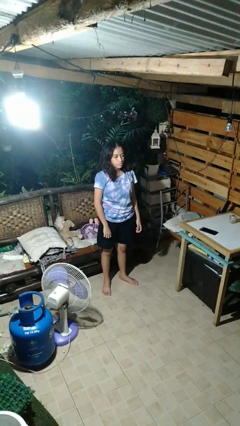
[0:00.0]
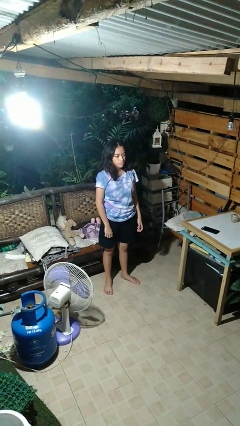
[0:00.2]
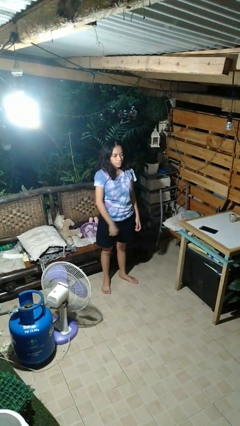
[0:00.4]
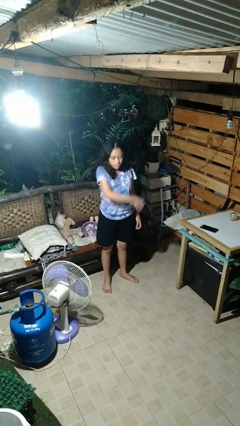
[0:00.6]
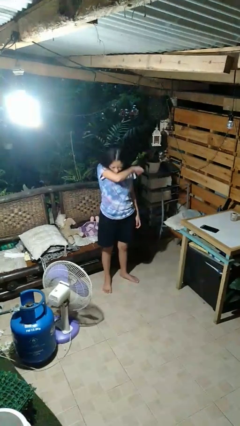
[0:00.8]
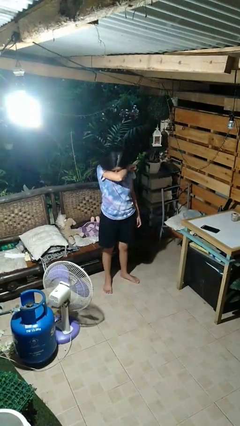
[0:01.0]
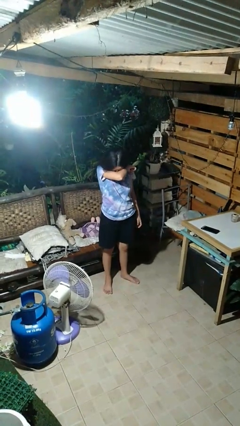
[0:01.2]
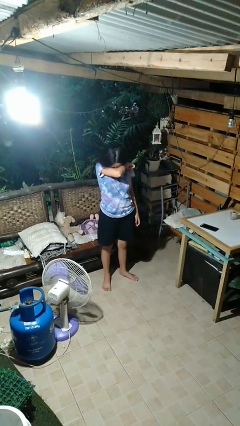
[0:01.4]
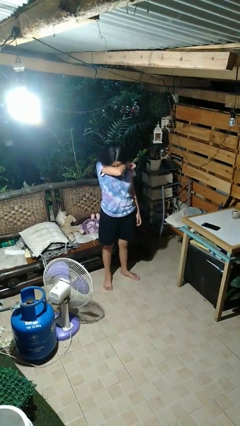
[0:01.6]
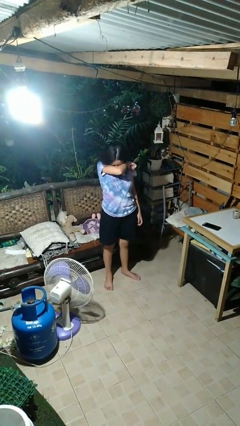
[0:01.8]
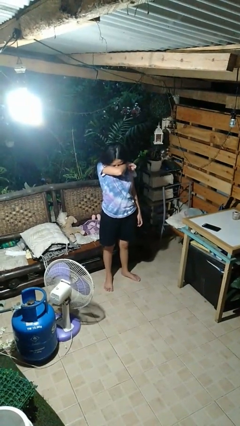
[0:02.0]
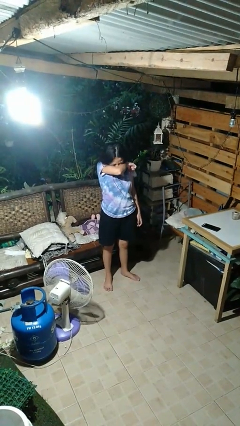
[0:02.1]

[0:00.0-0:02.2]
person sneezes into arm

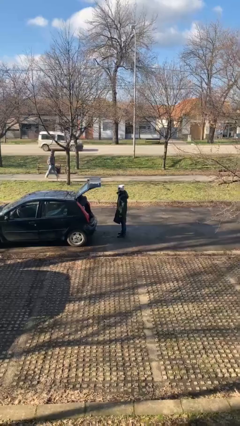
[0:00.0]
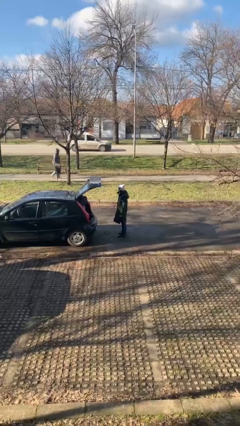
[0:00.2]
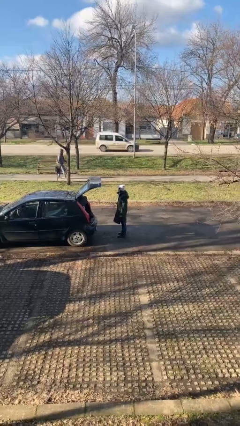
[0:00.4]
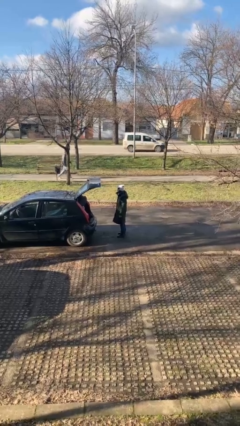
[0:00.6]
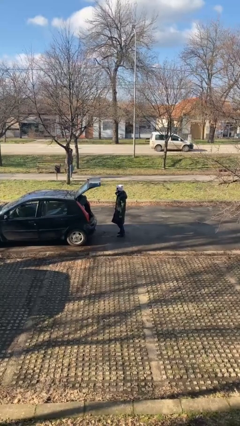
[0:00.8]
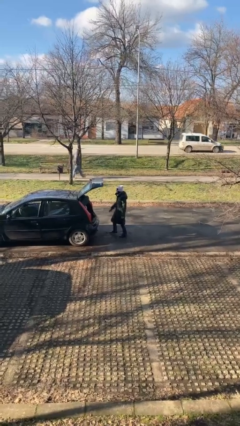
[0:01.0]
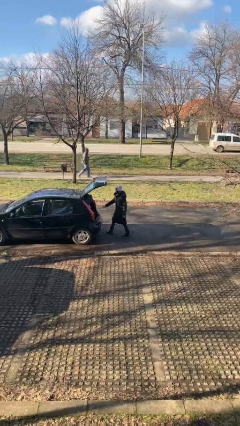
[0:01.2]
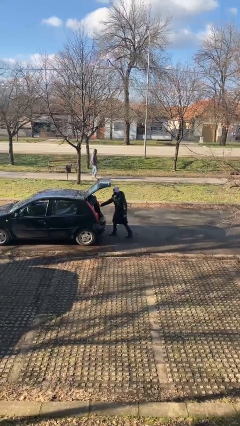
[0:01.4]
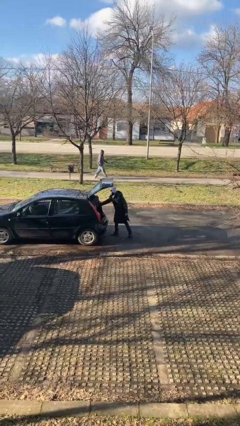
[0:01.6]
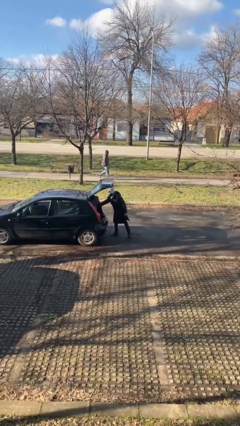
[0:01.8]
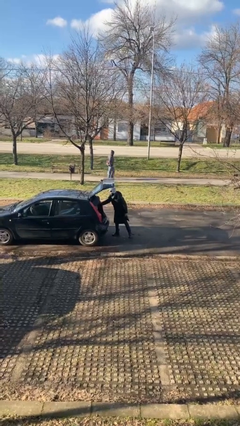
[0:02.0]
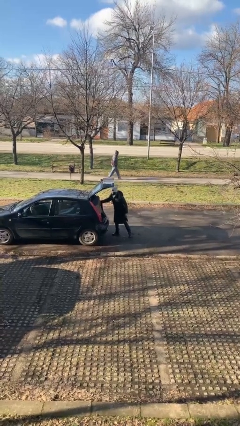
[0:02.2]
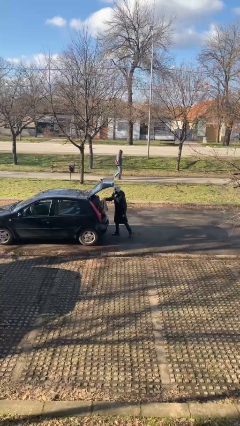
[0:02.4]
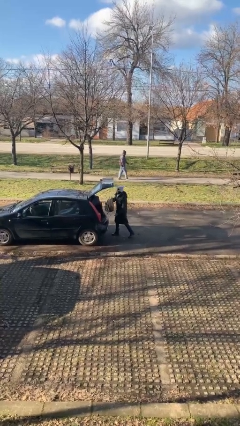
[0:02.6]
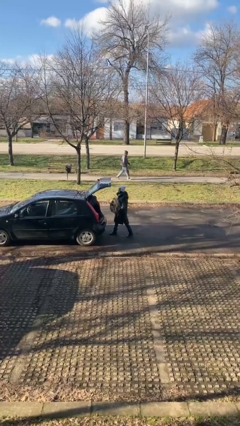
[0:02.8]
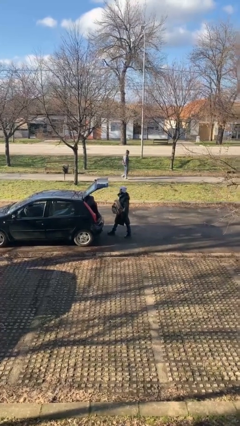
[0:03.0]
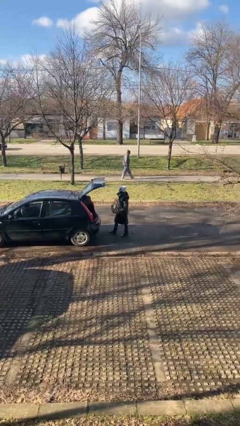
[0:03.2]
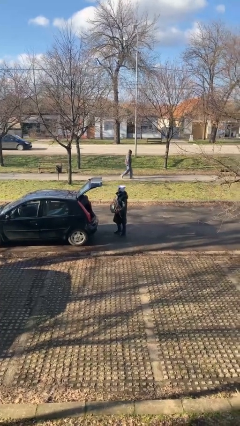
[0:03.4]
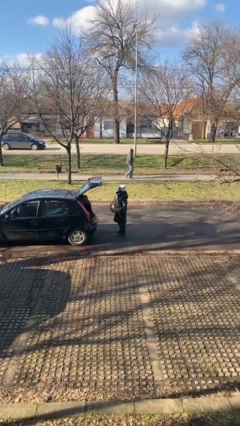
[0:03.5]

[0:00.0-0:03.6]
person unloads car

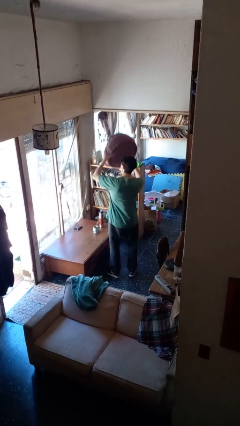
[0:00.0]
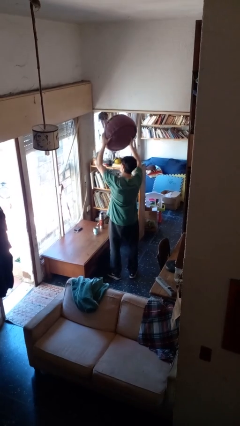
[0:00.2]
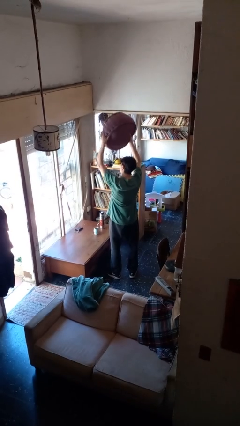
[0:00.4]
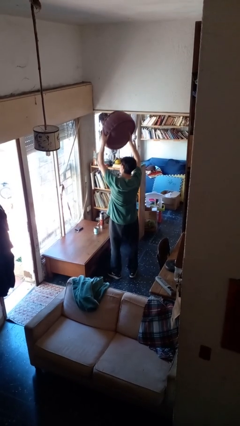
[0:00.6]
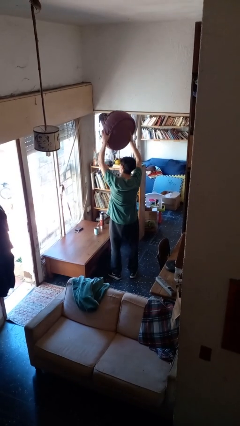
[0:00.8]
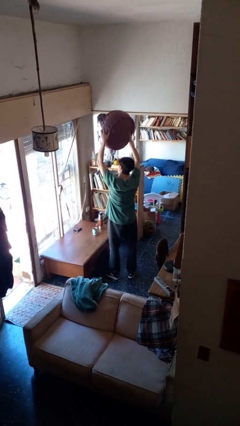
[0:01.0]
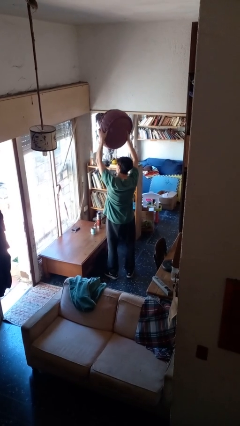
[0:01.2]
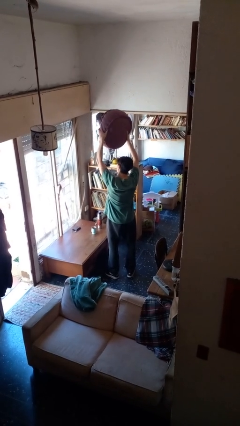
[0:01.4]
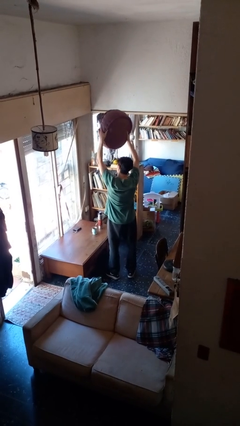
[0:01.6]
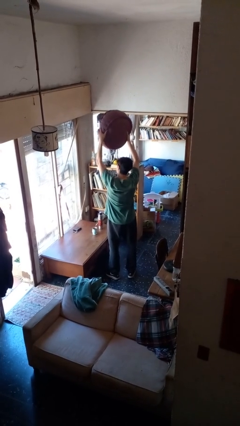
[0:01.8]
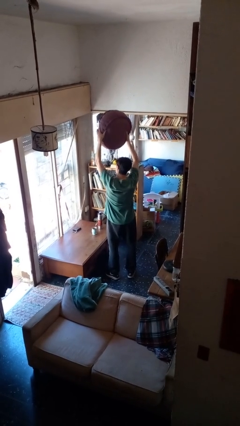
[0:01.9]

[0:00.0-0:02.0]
person holds object above head

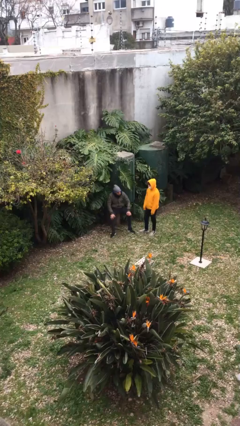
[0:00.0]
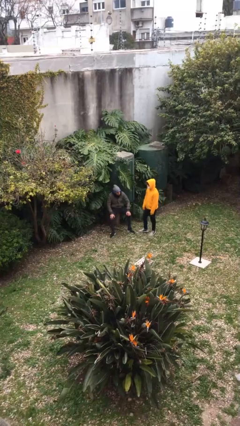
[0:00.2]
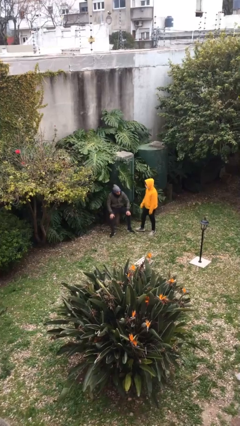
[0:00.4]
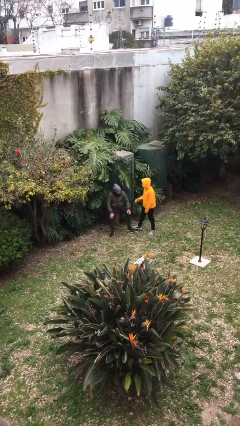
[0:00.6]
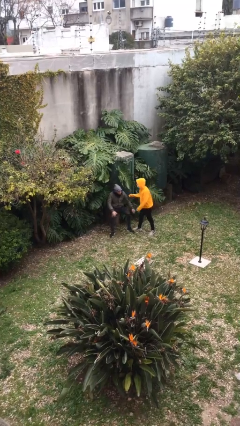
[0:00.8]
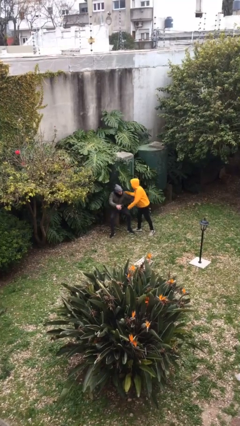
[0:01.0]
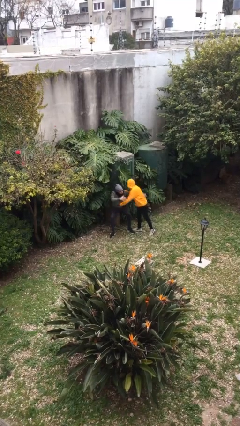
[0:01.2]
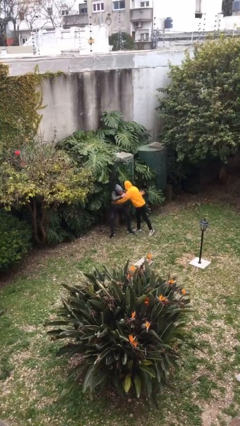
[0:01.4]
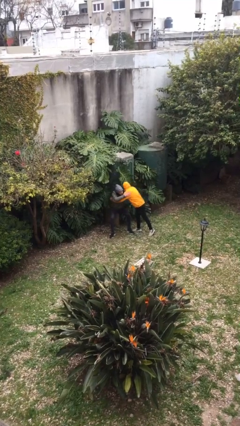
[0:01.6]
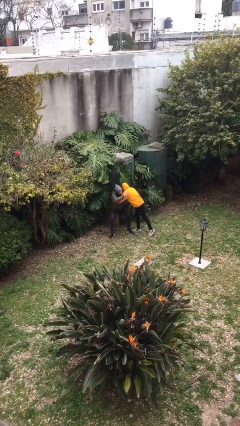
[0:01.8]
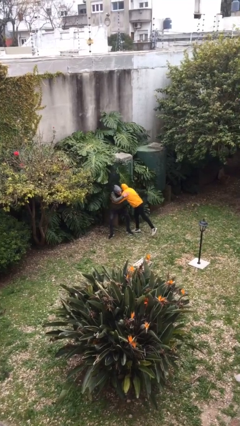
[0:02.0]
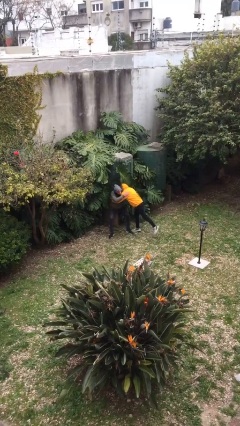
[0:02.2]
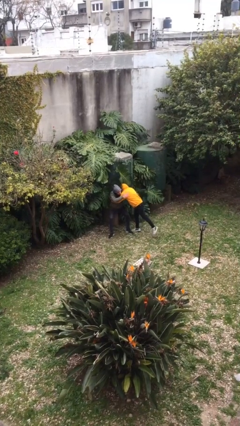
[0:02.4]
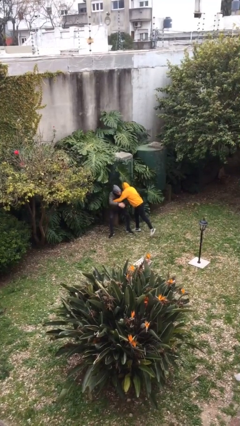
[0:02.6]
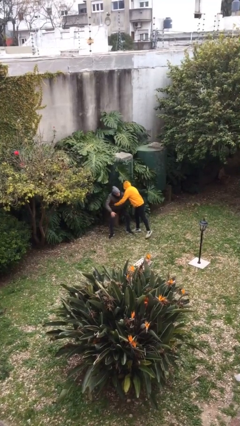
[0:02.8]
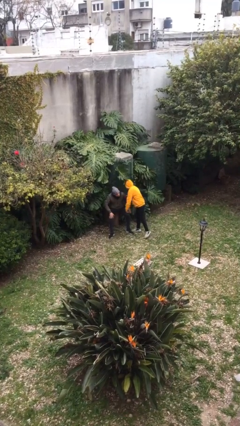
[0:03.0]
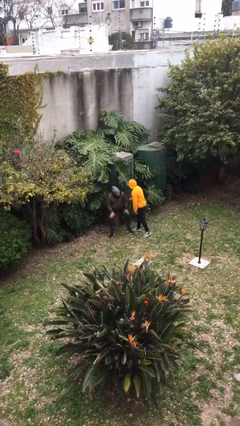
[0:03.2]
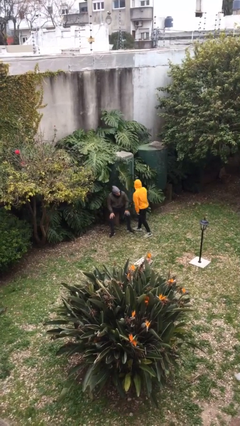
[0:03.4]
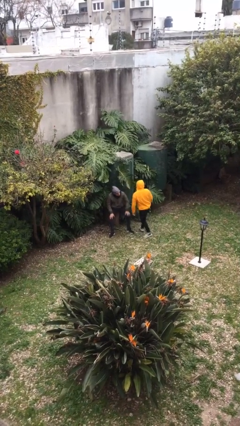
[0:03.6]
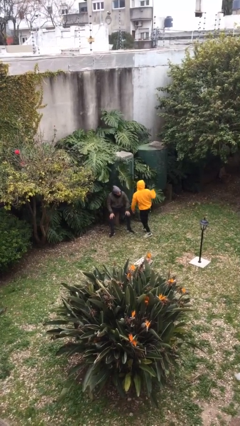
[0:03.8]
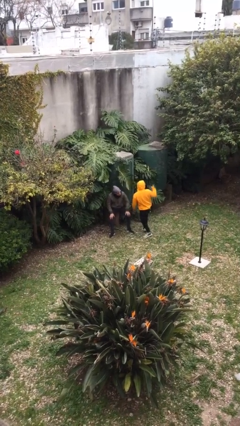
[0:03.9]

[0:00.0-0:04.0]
person embraces person

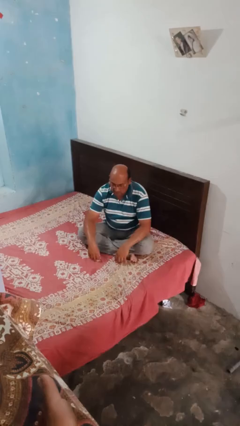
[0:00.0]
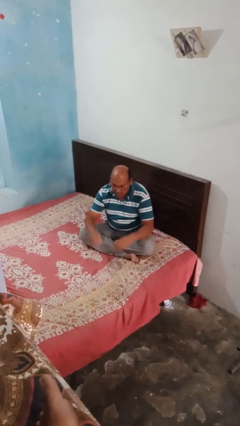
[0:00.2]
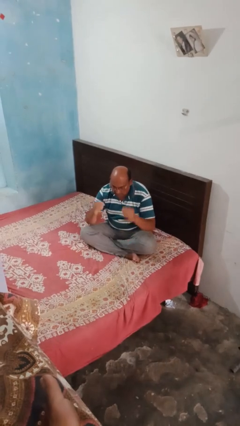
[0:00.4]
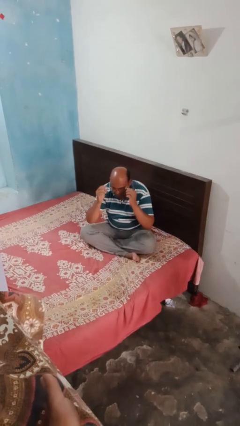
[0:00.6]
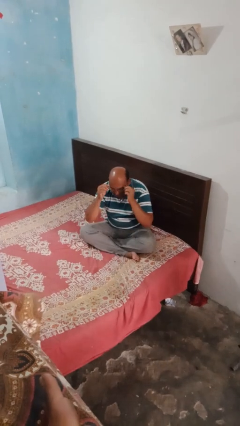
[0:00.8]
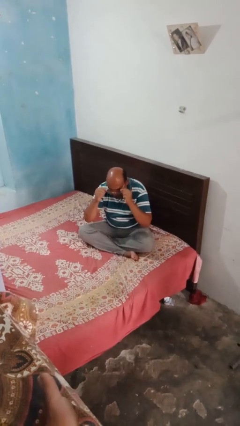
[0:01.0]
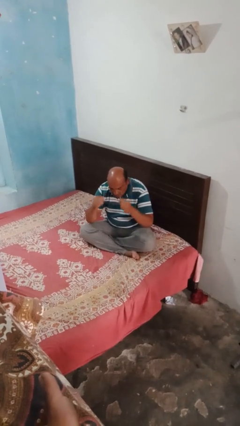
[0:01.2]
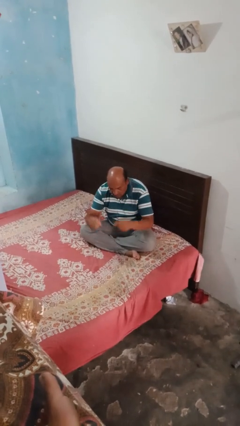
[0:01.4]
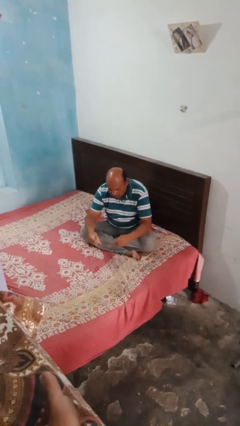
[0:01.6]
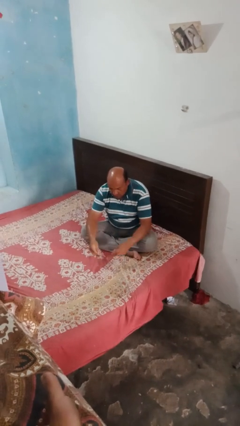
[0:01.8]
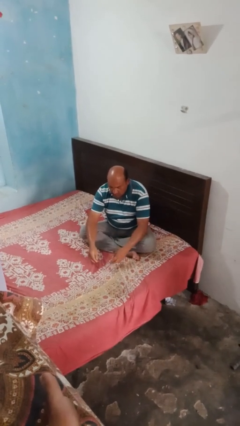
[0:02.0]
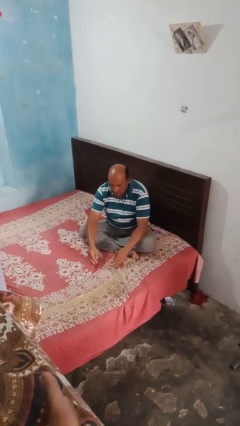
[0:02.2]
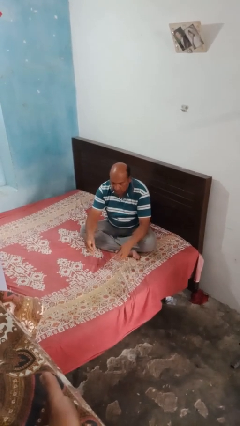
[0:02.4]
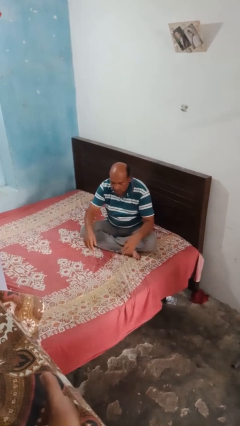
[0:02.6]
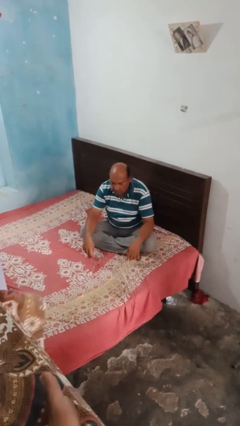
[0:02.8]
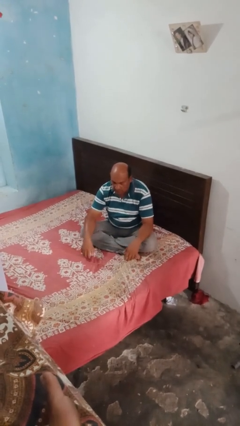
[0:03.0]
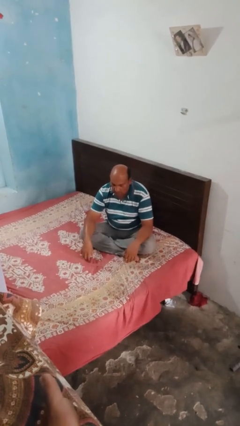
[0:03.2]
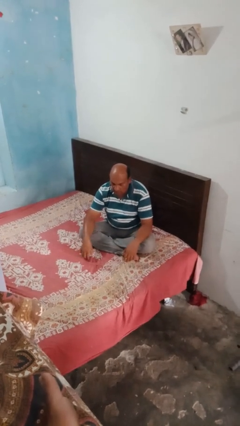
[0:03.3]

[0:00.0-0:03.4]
person takes off glasses

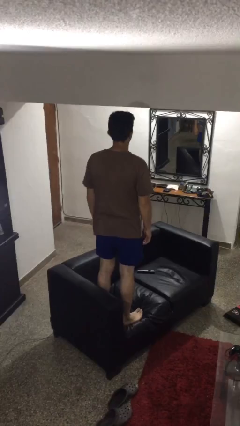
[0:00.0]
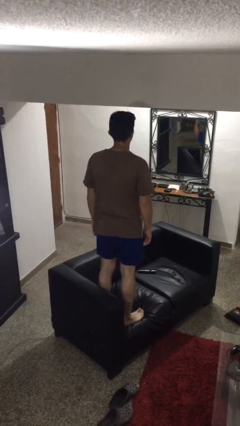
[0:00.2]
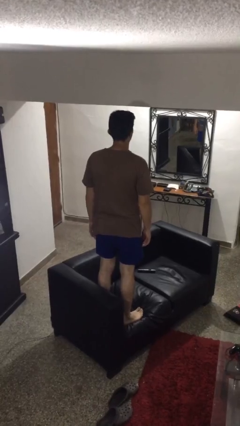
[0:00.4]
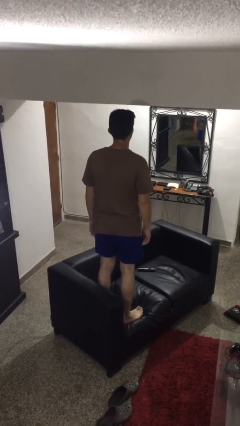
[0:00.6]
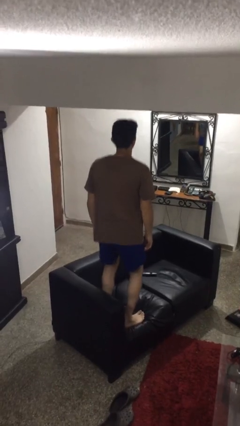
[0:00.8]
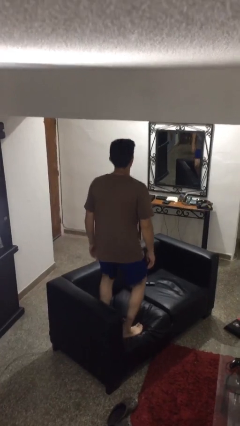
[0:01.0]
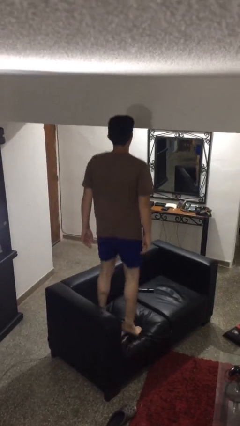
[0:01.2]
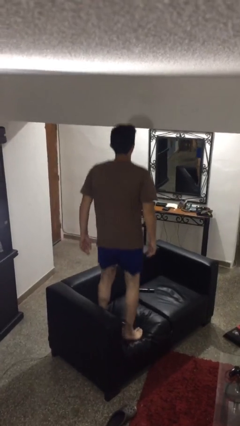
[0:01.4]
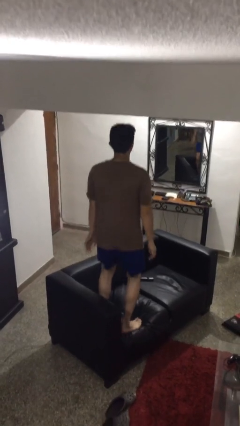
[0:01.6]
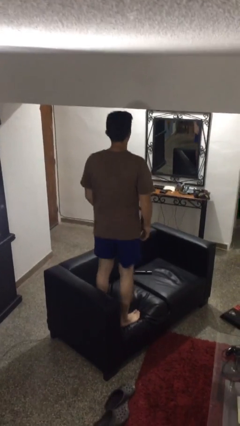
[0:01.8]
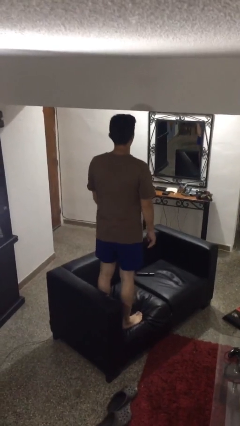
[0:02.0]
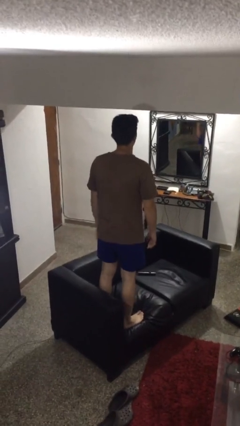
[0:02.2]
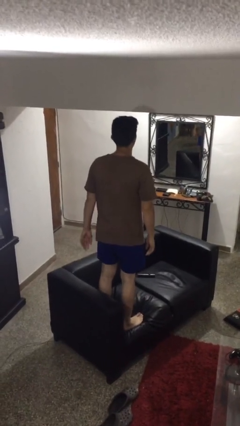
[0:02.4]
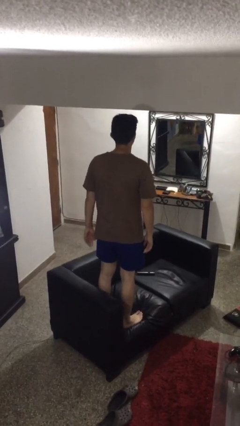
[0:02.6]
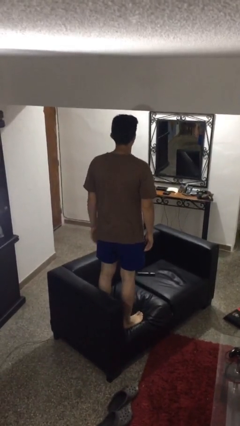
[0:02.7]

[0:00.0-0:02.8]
person jumps on couch
